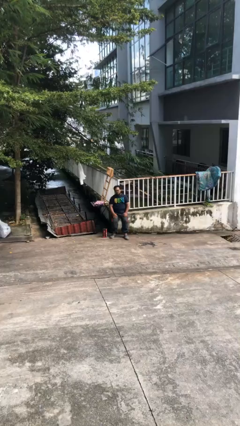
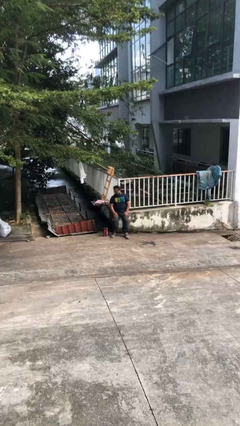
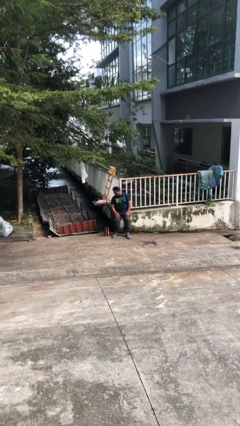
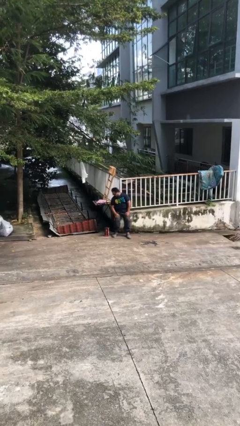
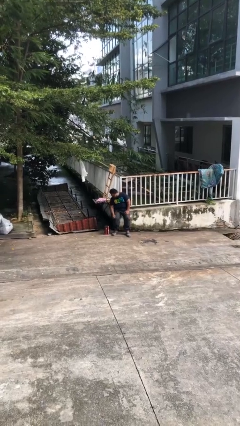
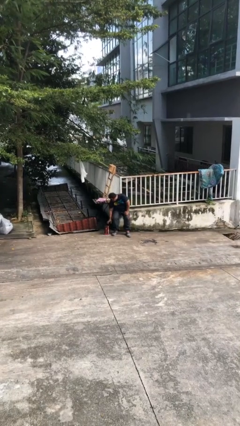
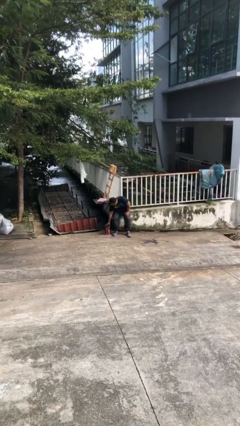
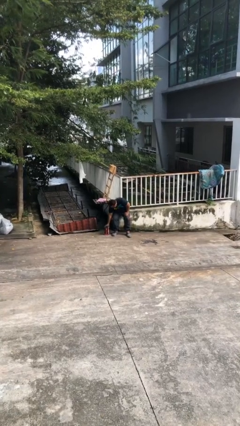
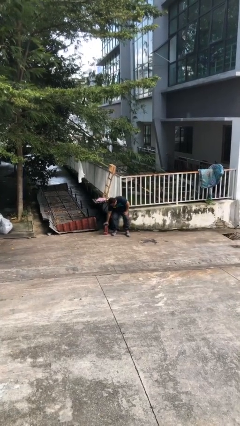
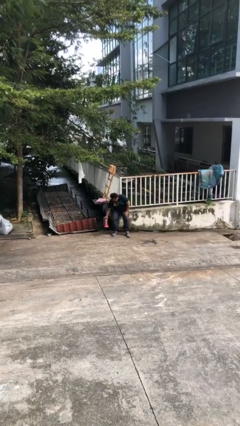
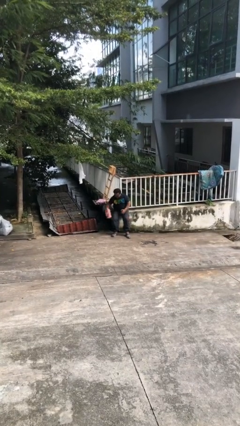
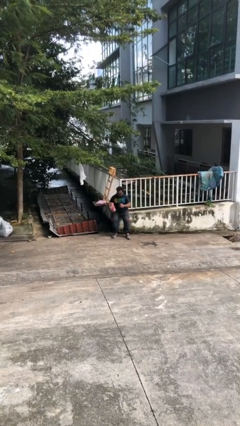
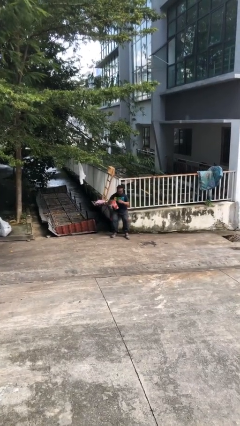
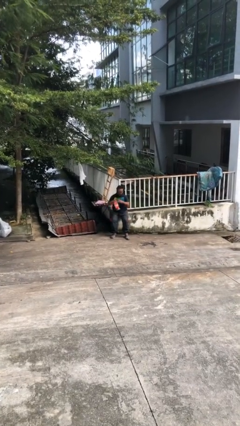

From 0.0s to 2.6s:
person picks up object from floor

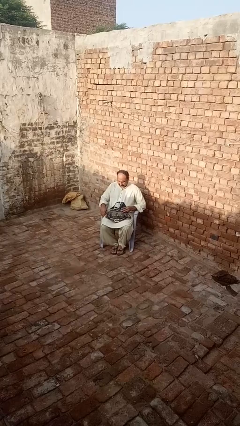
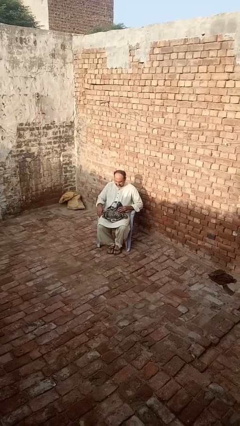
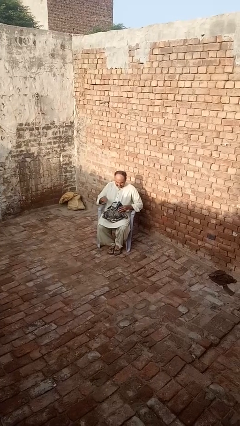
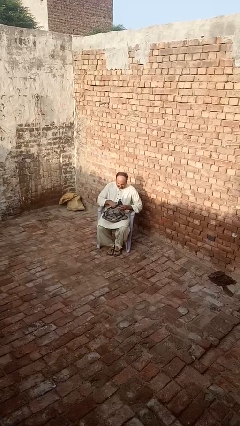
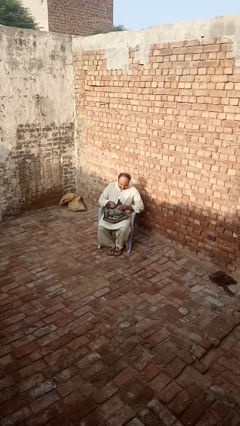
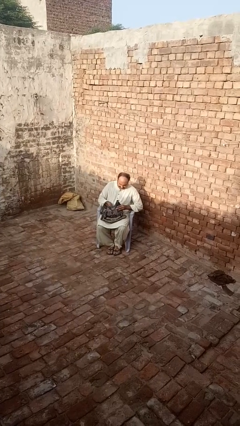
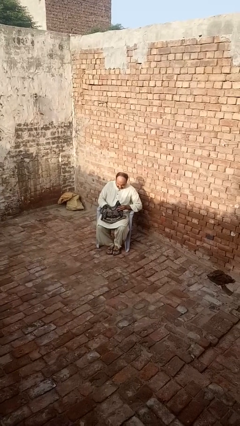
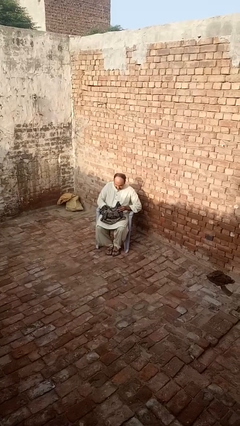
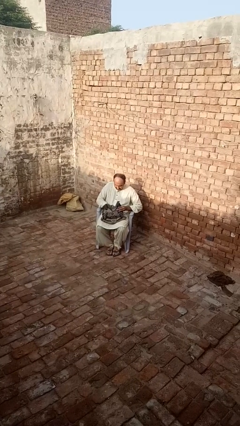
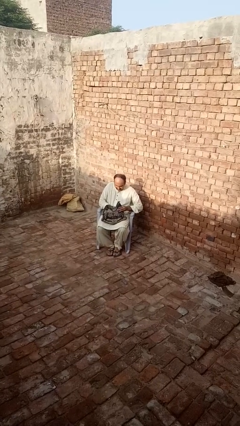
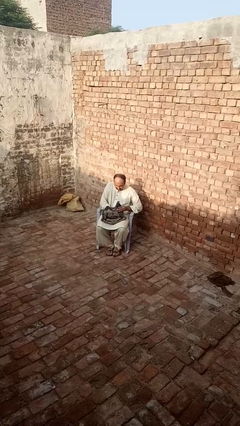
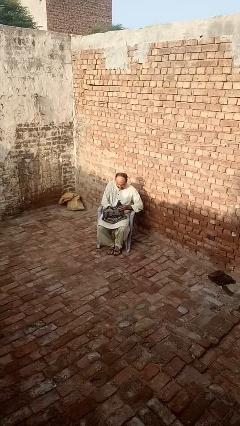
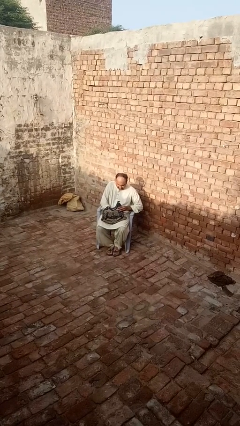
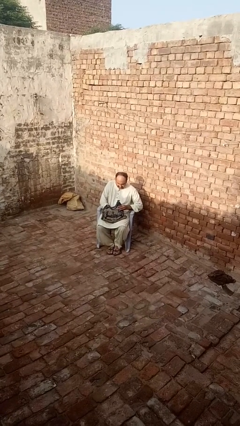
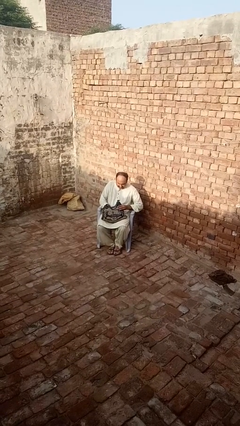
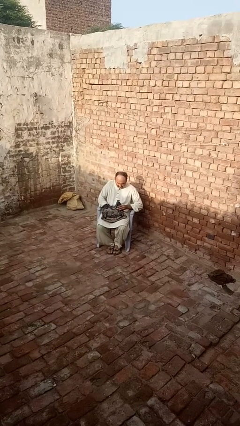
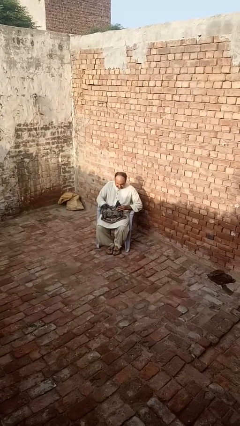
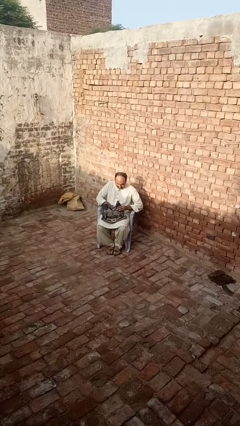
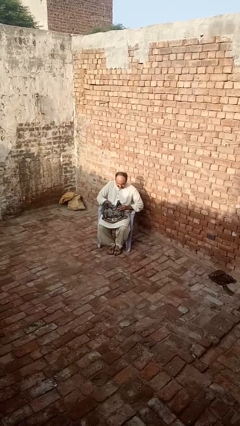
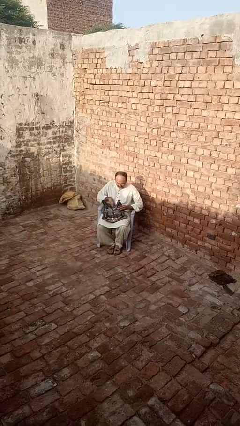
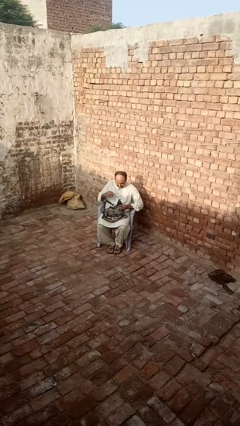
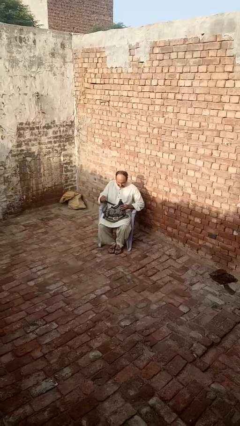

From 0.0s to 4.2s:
person searches in purse

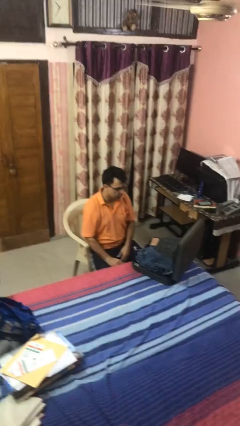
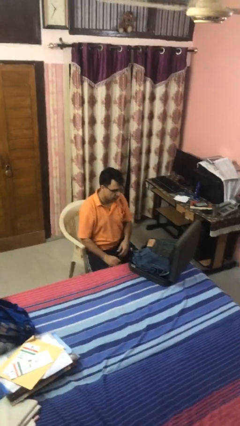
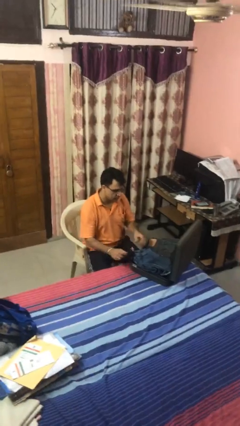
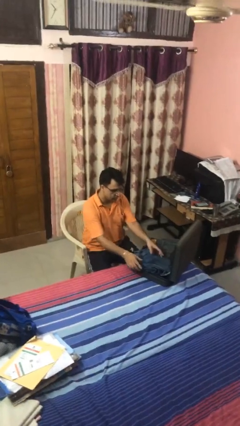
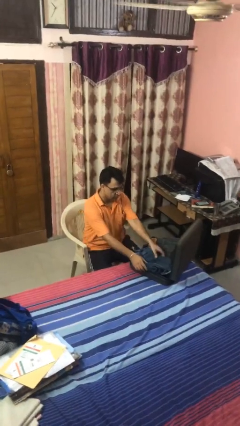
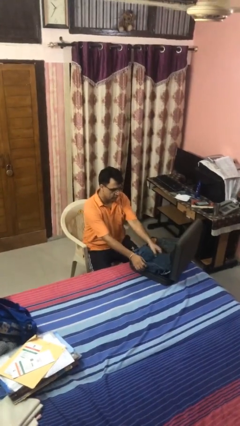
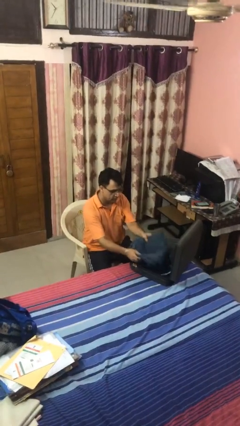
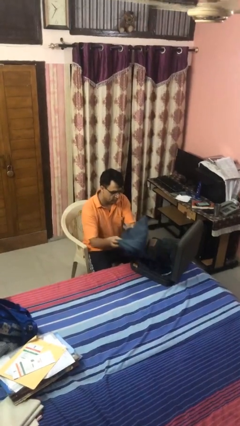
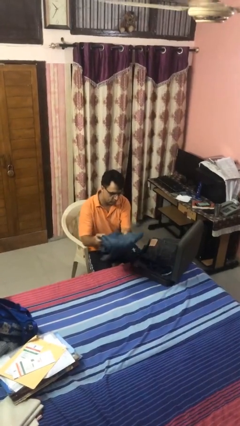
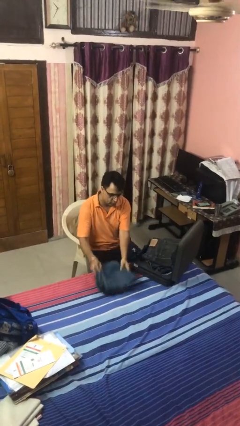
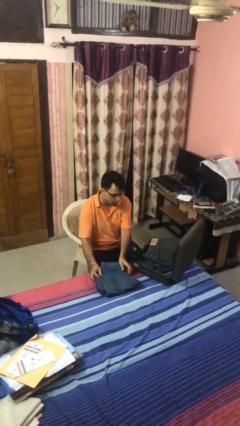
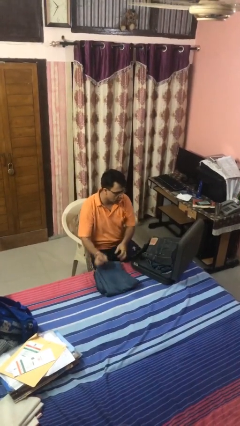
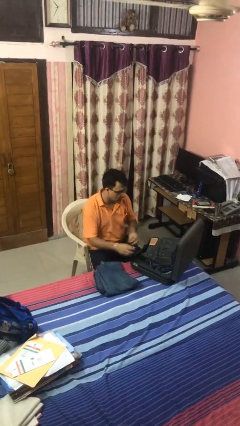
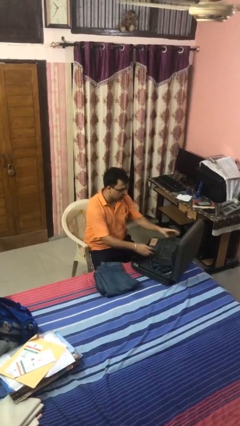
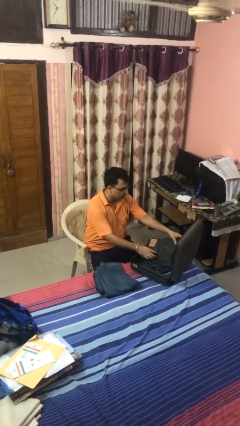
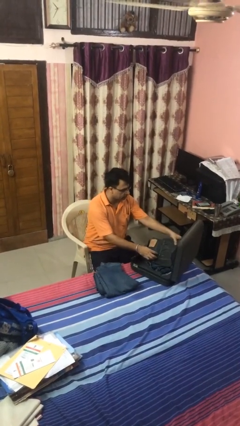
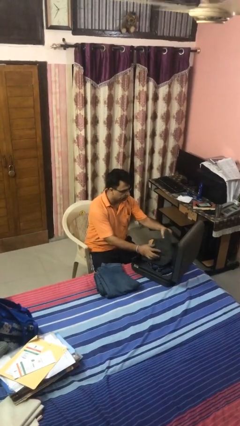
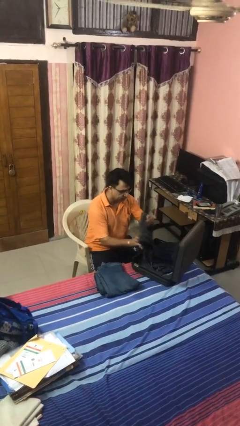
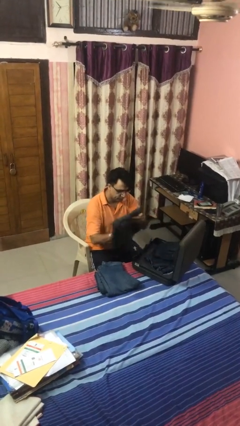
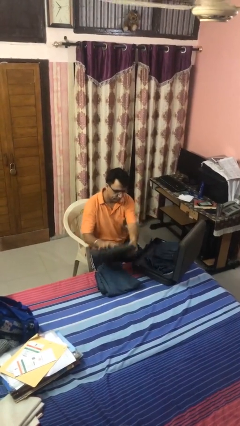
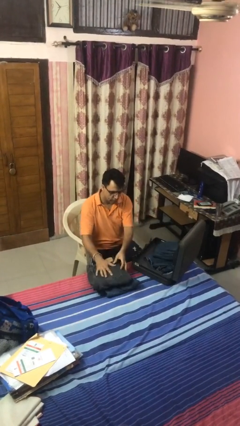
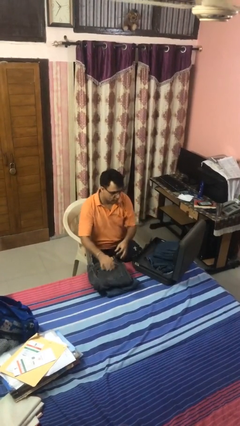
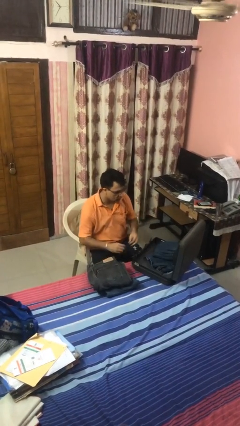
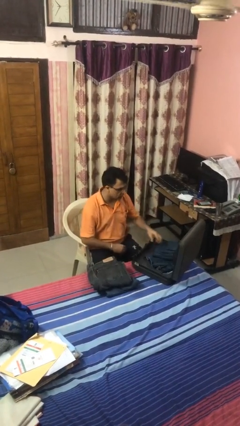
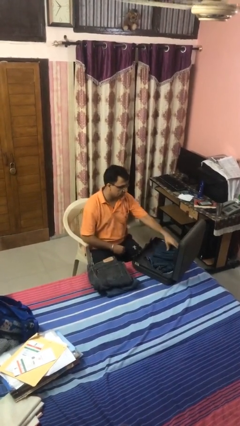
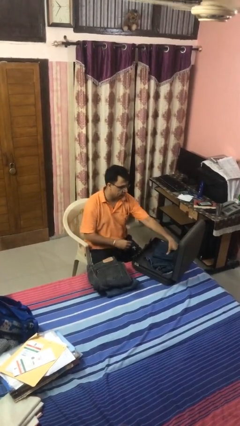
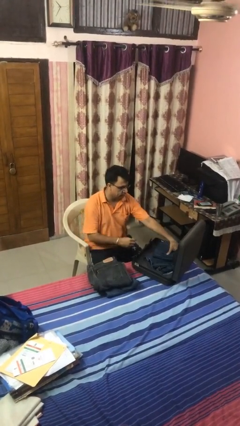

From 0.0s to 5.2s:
person unloads clothes from suitcase

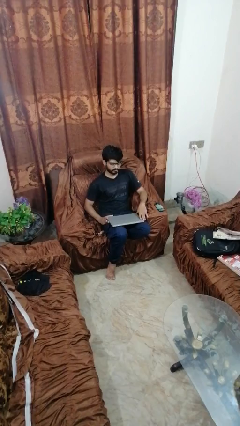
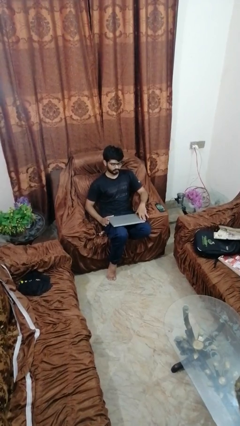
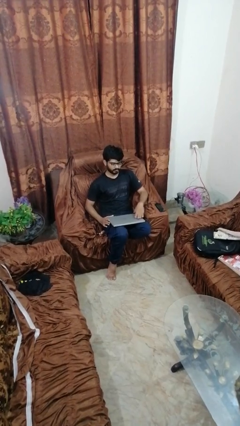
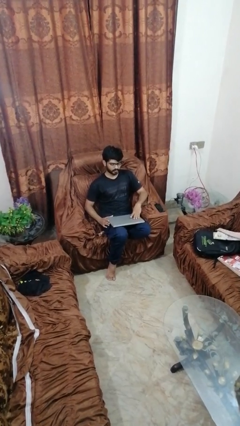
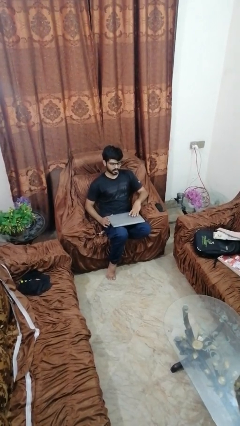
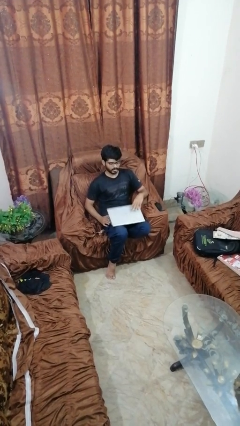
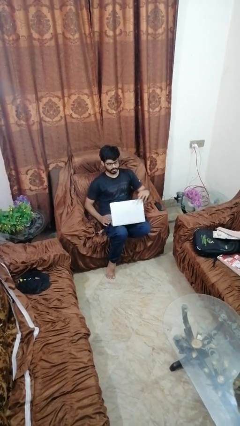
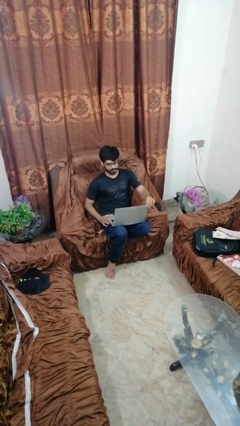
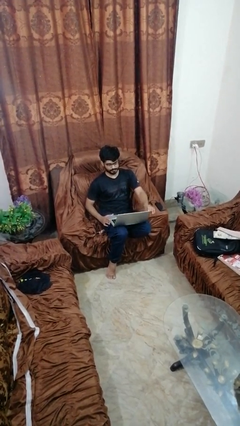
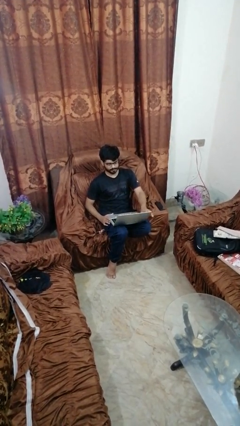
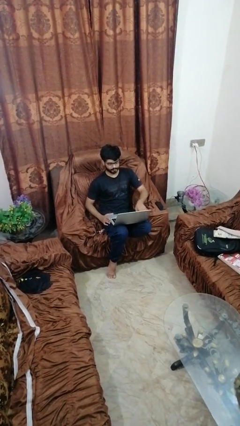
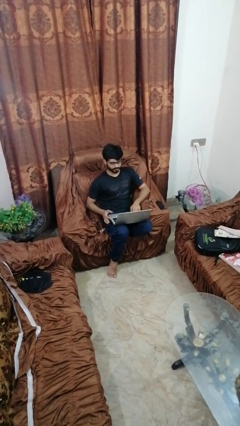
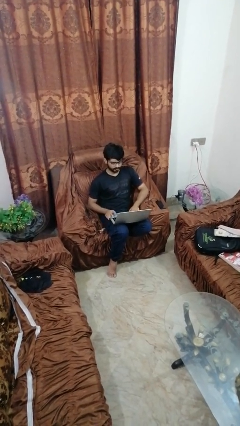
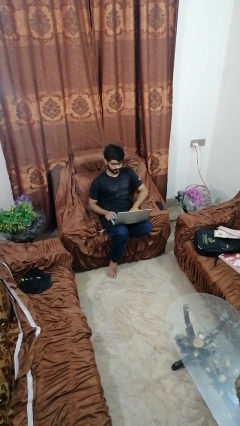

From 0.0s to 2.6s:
person opens laptop

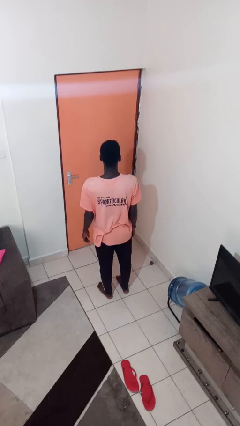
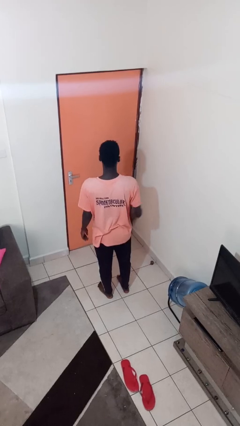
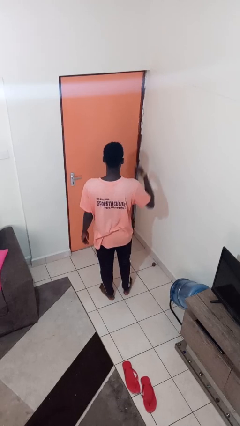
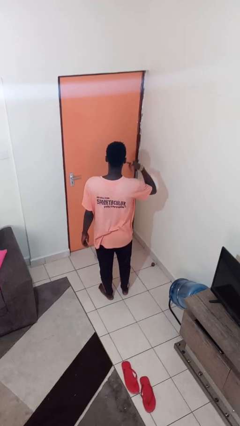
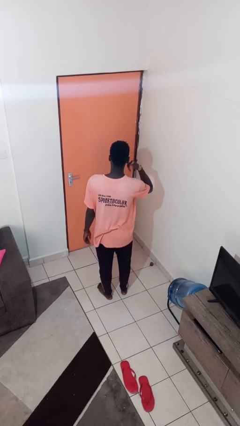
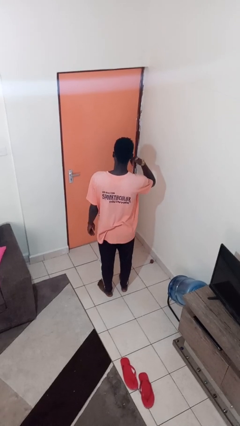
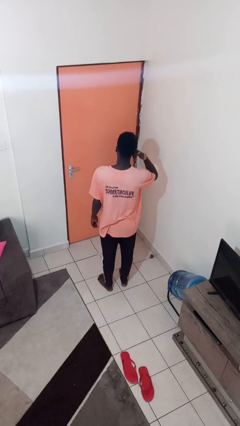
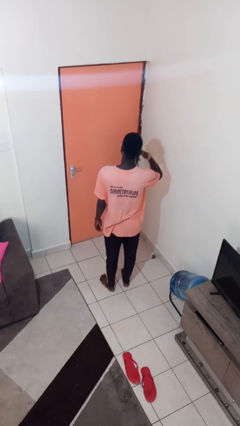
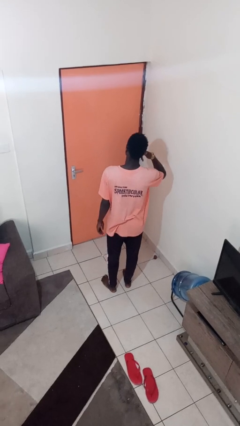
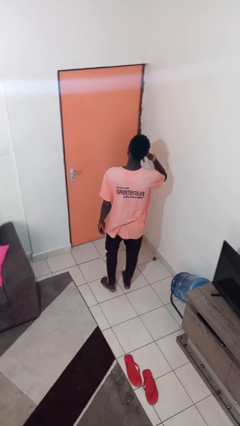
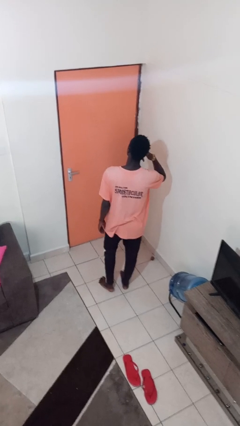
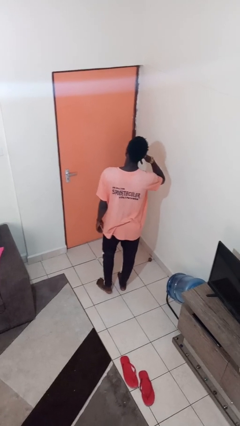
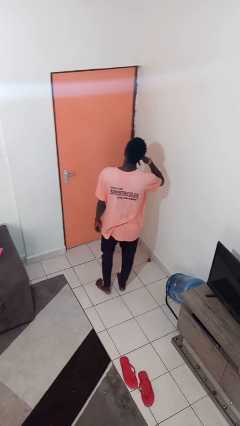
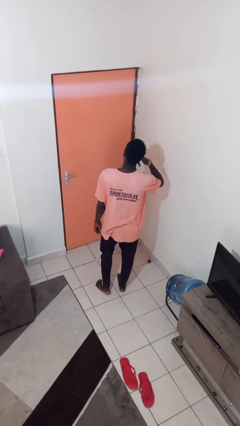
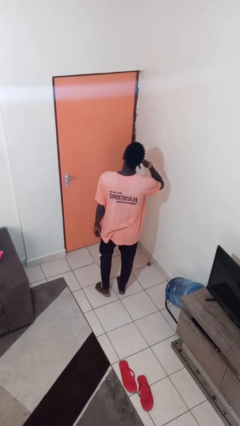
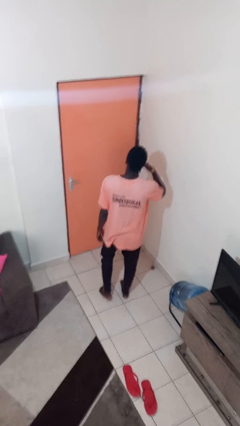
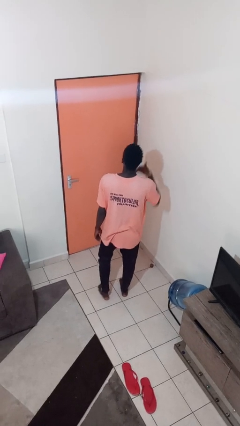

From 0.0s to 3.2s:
person gestures call me
